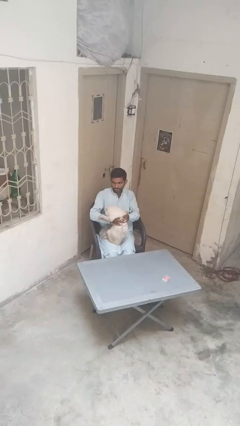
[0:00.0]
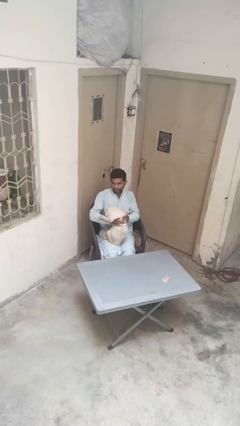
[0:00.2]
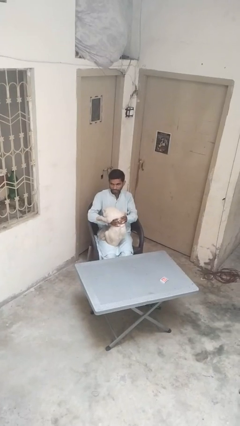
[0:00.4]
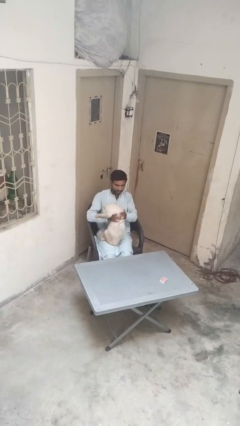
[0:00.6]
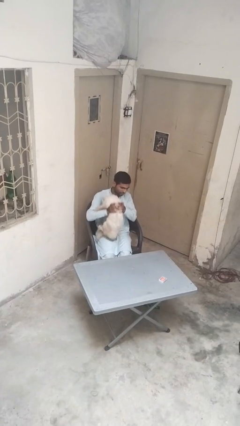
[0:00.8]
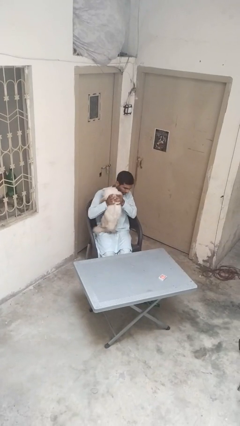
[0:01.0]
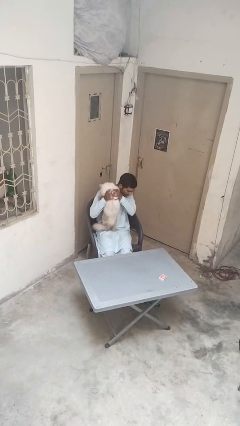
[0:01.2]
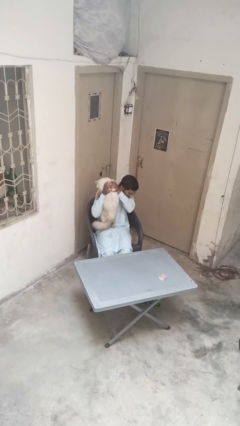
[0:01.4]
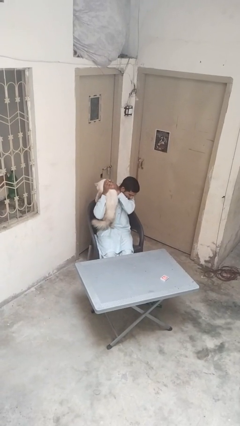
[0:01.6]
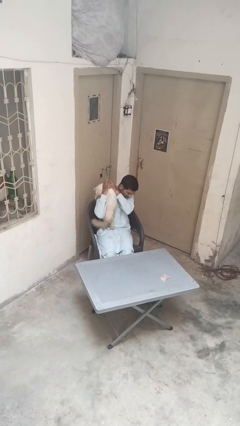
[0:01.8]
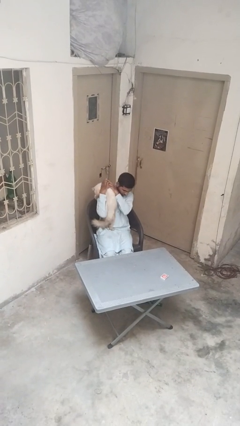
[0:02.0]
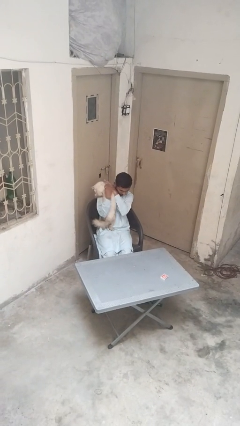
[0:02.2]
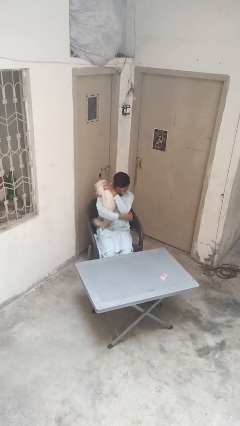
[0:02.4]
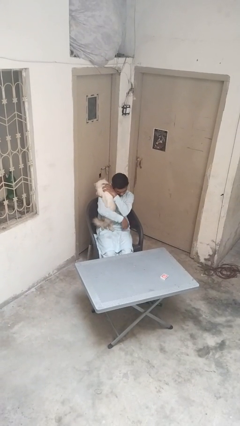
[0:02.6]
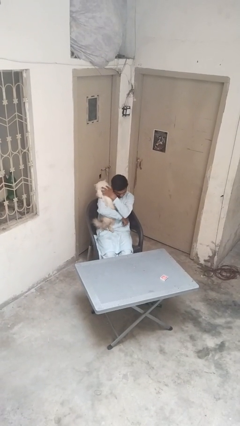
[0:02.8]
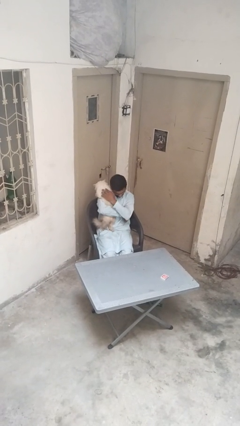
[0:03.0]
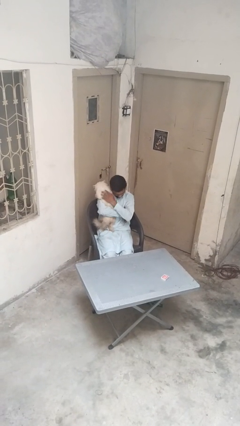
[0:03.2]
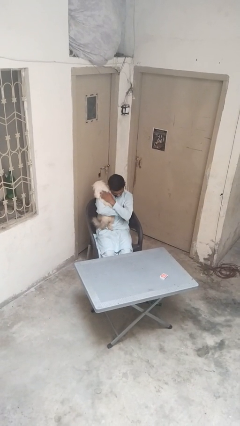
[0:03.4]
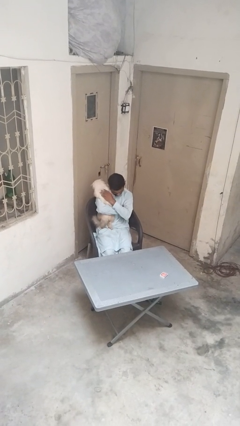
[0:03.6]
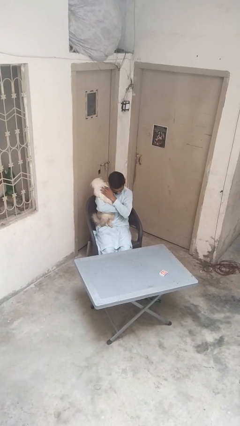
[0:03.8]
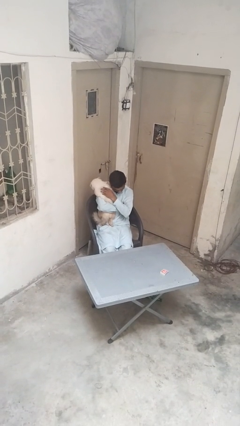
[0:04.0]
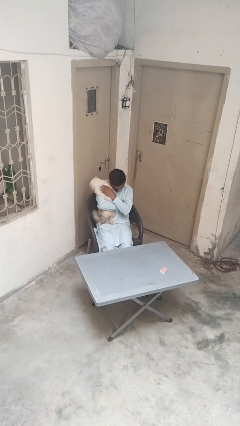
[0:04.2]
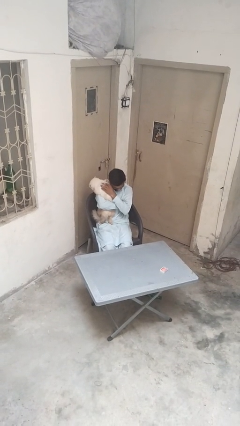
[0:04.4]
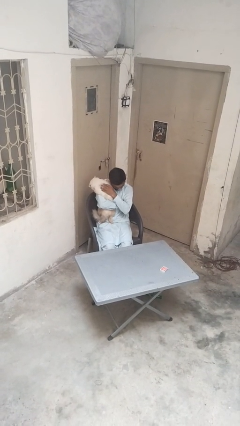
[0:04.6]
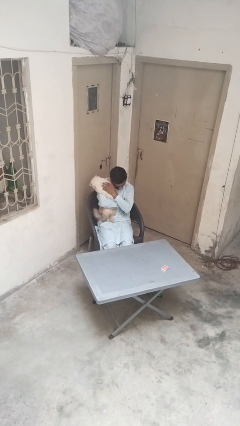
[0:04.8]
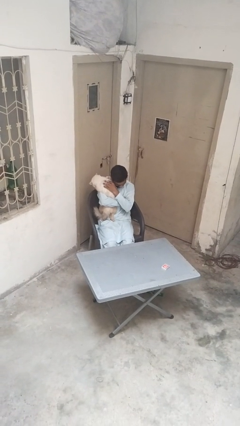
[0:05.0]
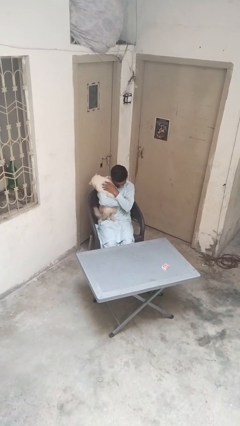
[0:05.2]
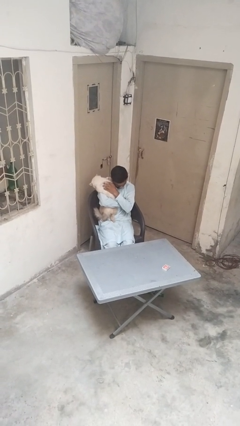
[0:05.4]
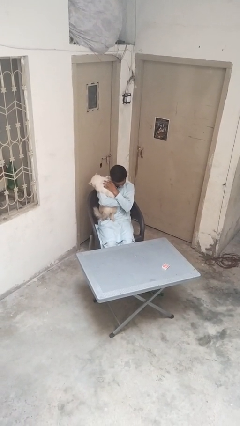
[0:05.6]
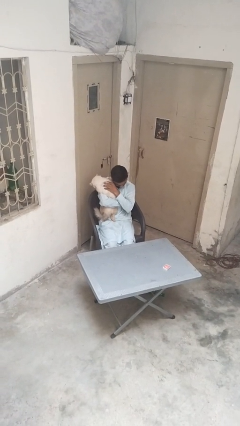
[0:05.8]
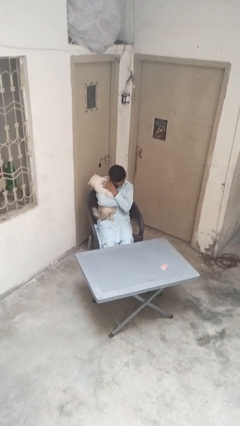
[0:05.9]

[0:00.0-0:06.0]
person hugs cat

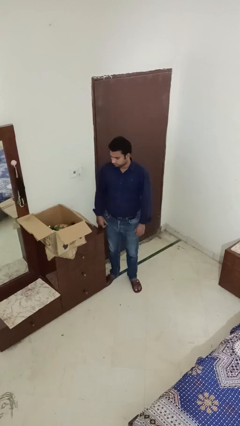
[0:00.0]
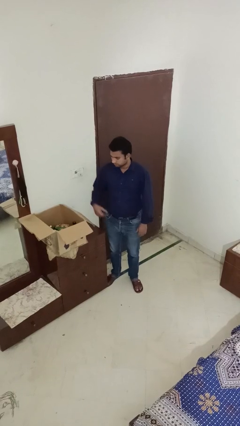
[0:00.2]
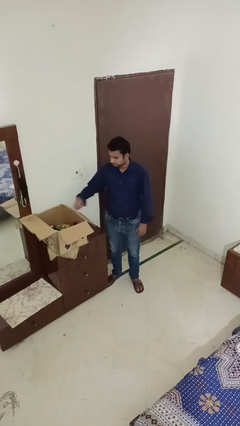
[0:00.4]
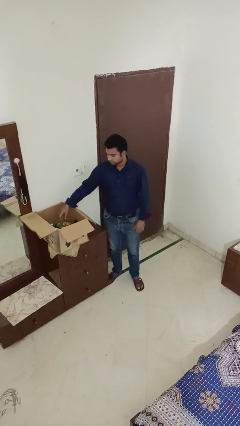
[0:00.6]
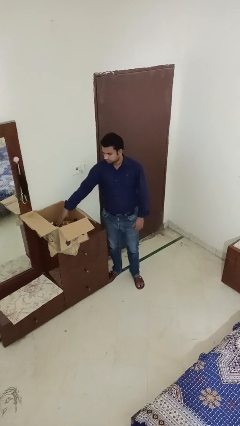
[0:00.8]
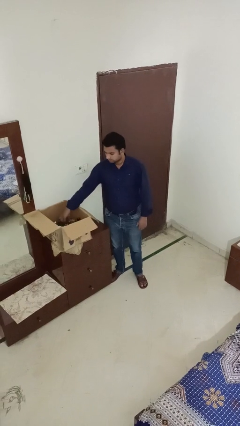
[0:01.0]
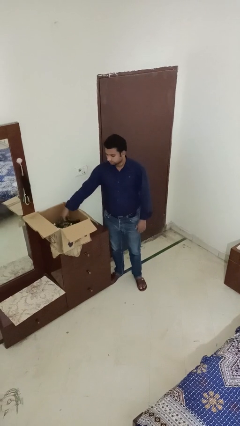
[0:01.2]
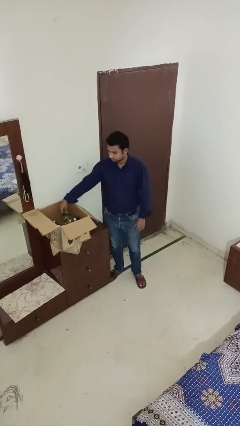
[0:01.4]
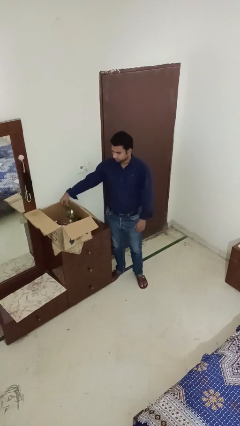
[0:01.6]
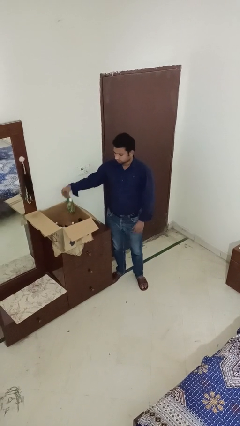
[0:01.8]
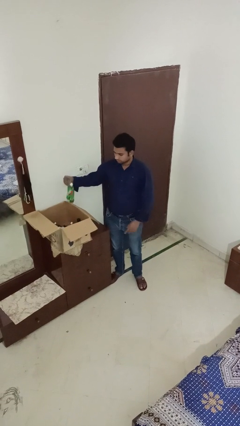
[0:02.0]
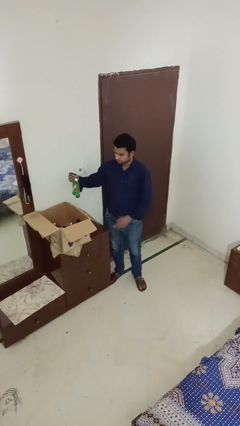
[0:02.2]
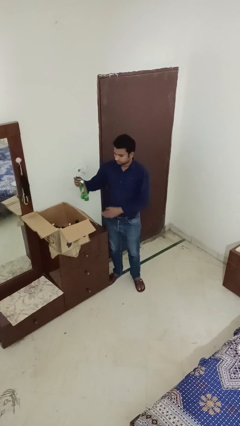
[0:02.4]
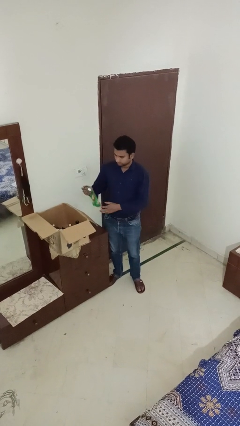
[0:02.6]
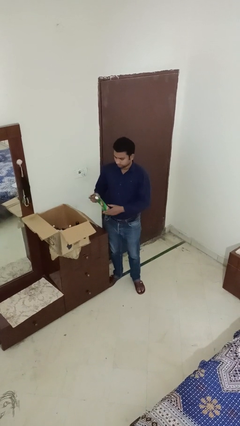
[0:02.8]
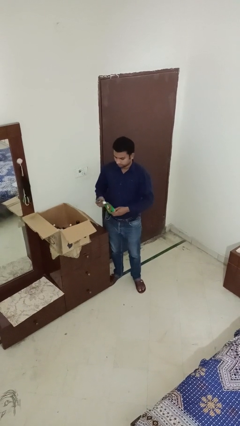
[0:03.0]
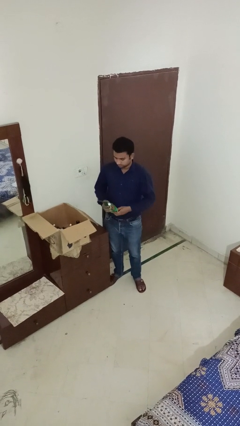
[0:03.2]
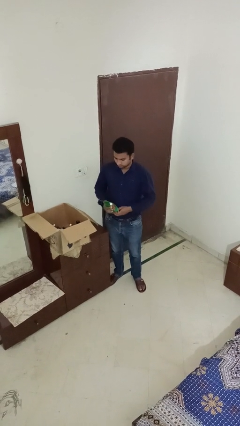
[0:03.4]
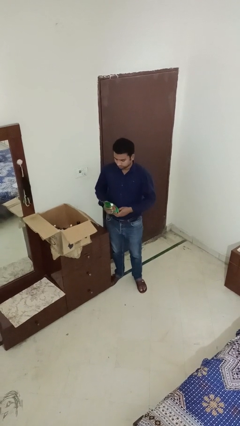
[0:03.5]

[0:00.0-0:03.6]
person takes object from box

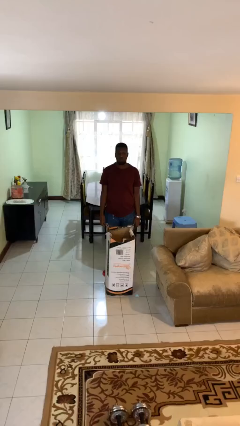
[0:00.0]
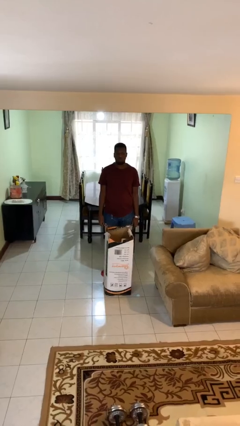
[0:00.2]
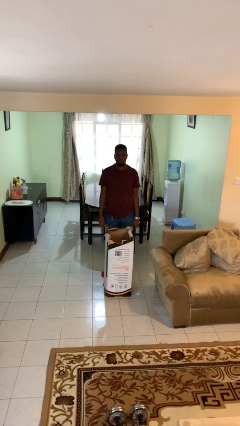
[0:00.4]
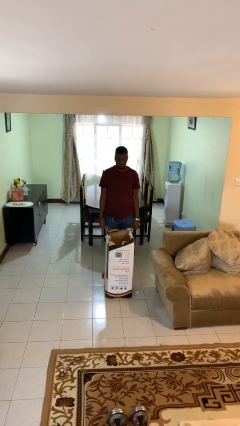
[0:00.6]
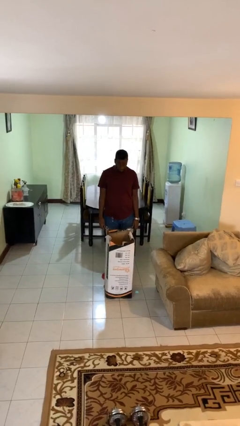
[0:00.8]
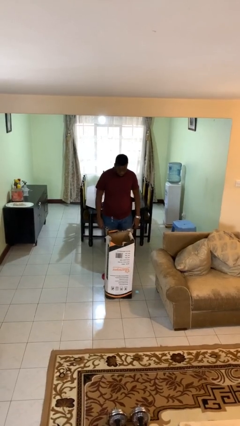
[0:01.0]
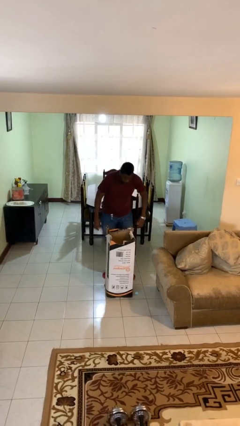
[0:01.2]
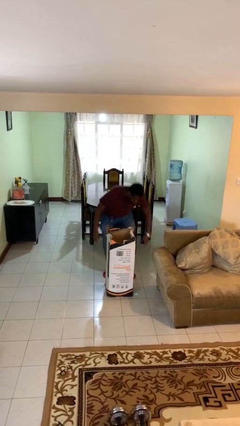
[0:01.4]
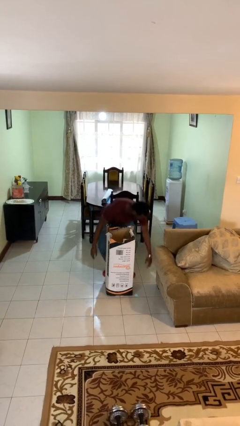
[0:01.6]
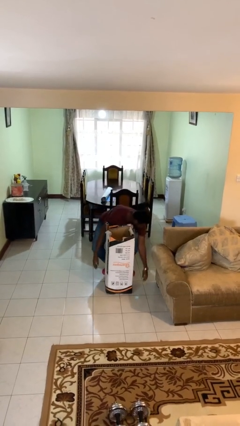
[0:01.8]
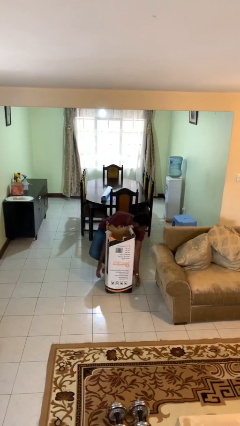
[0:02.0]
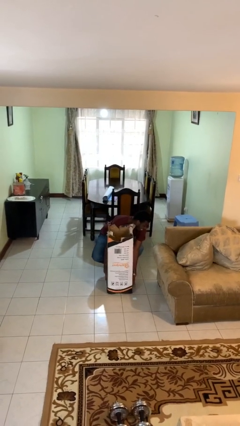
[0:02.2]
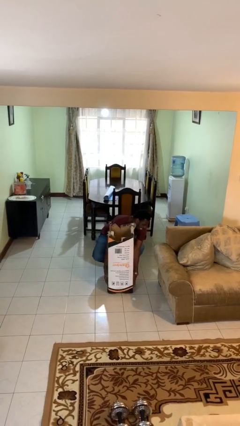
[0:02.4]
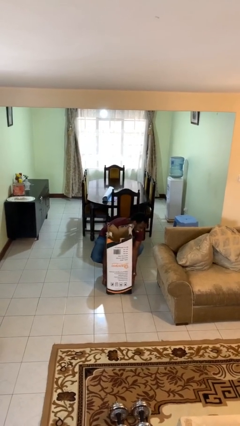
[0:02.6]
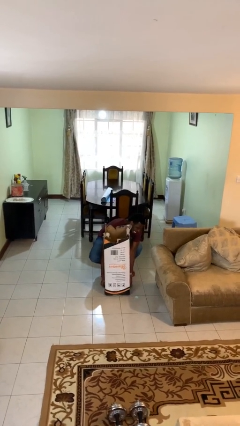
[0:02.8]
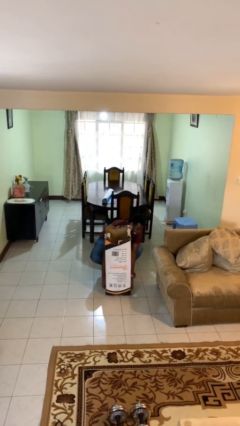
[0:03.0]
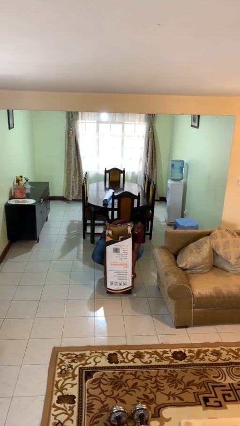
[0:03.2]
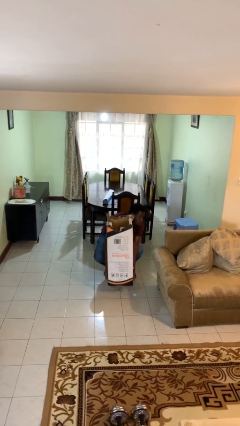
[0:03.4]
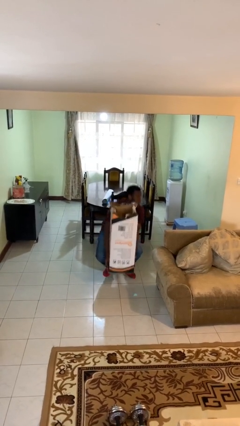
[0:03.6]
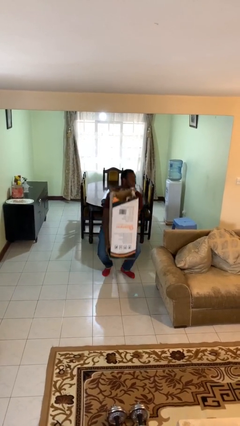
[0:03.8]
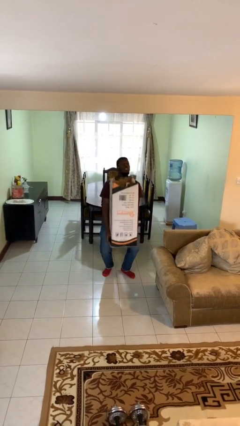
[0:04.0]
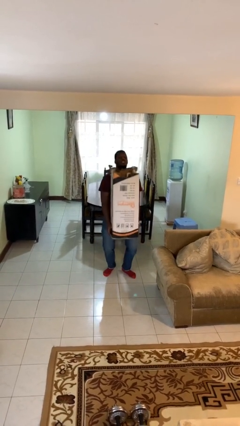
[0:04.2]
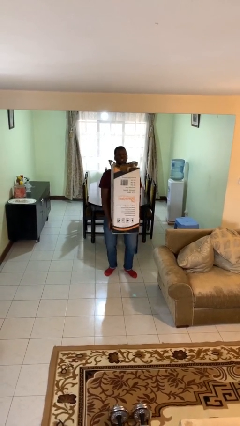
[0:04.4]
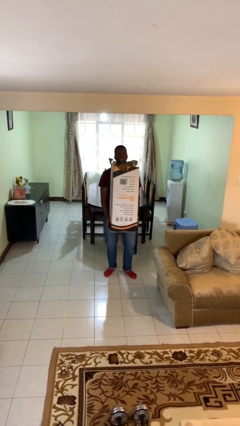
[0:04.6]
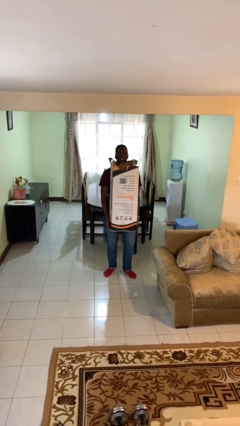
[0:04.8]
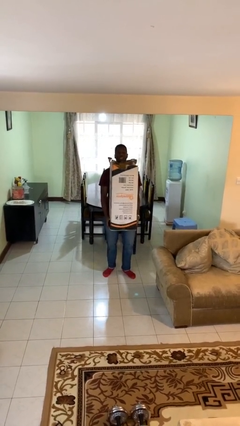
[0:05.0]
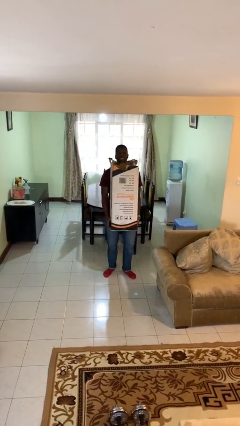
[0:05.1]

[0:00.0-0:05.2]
person picks up object from floor

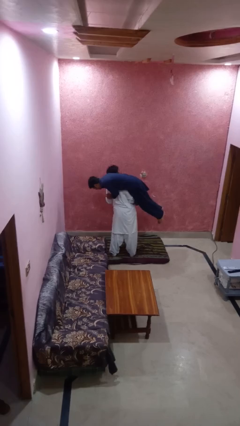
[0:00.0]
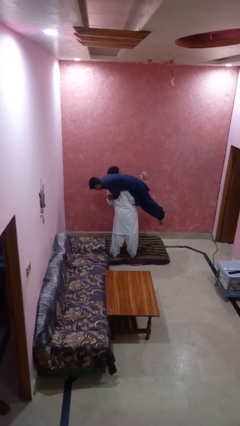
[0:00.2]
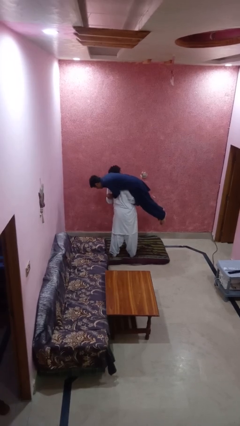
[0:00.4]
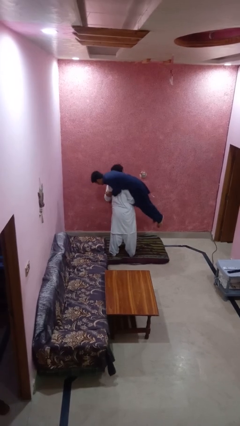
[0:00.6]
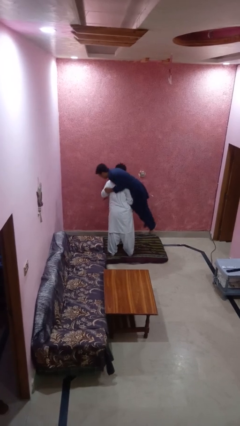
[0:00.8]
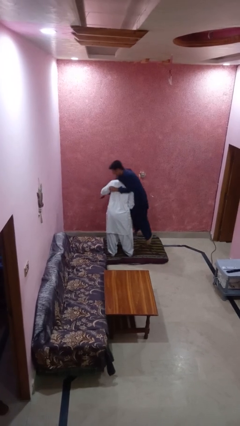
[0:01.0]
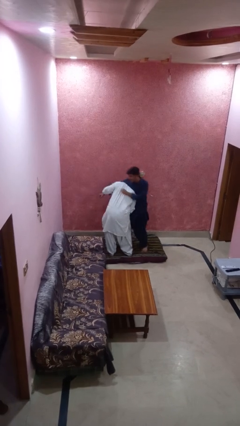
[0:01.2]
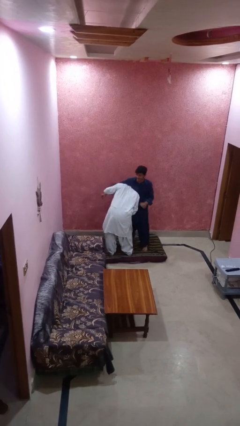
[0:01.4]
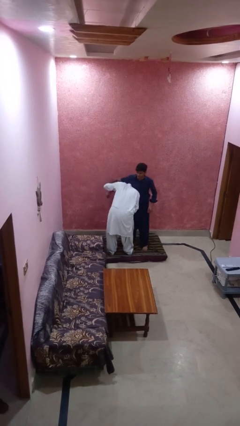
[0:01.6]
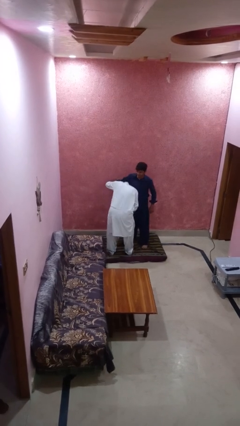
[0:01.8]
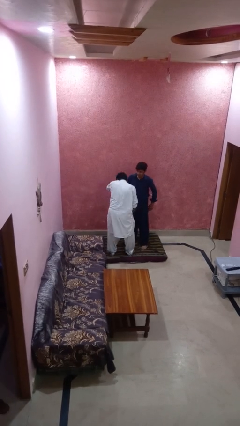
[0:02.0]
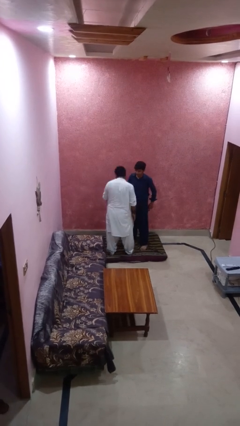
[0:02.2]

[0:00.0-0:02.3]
person puts down person

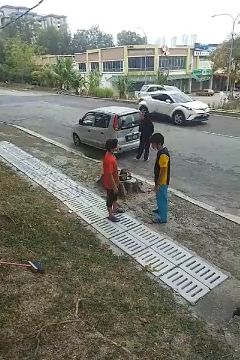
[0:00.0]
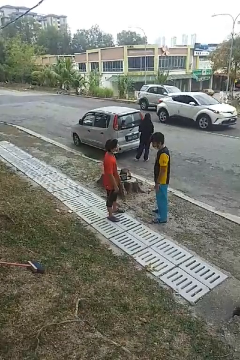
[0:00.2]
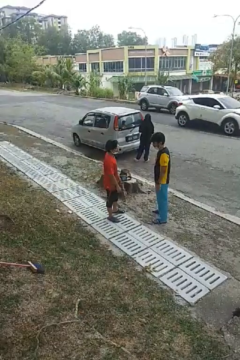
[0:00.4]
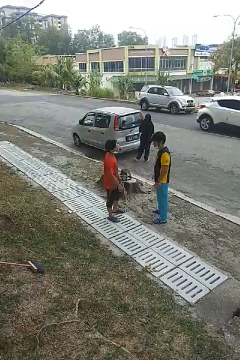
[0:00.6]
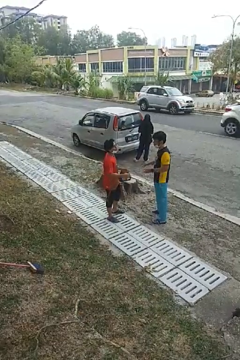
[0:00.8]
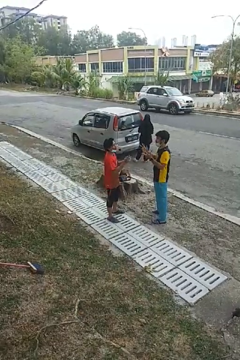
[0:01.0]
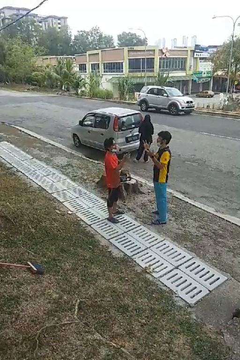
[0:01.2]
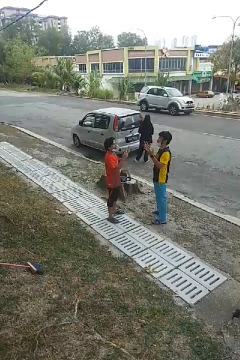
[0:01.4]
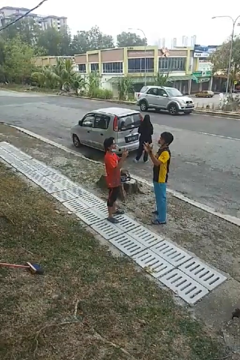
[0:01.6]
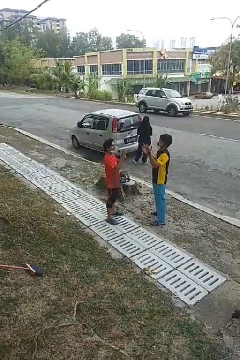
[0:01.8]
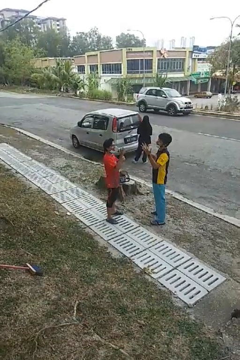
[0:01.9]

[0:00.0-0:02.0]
person talks to person
